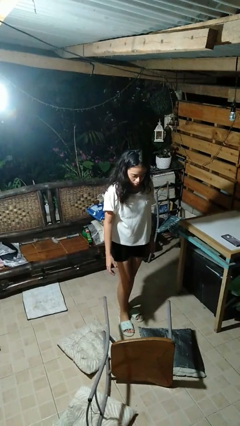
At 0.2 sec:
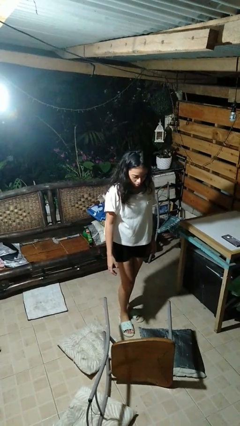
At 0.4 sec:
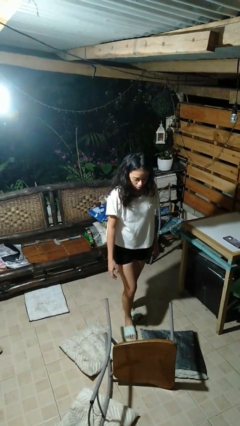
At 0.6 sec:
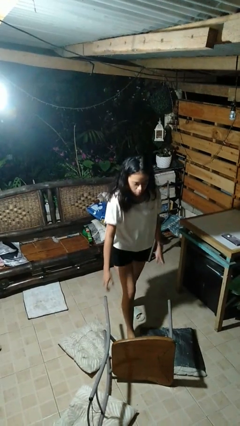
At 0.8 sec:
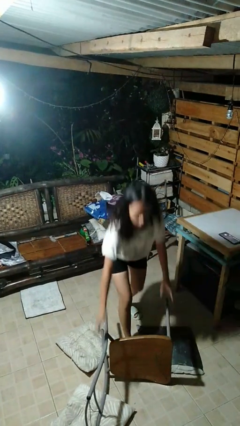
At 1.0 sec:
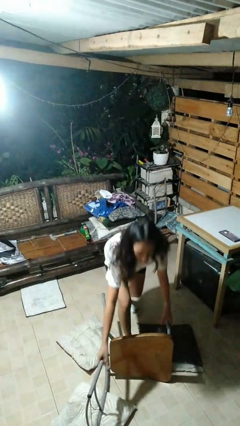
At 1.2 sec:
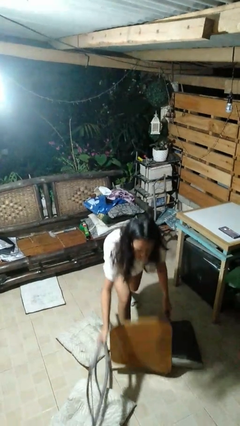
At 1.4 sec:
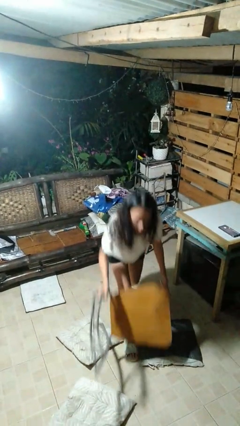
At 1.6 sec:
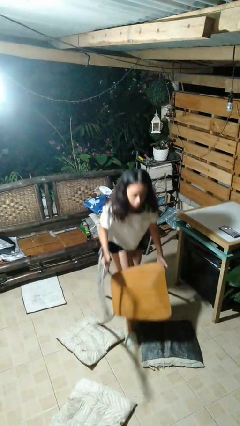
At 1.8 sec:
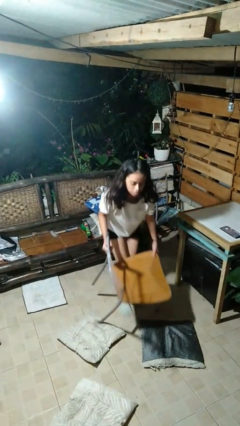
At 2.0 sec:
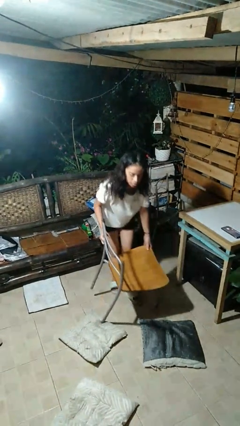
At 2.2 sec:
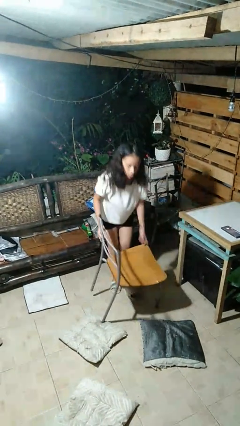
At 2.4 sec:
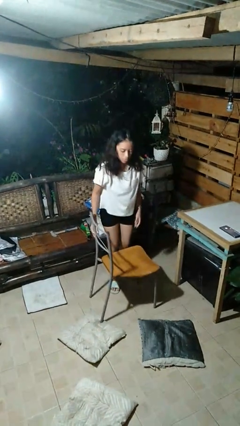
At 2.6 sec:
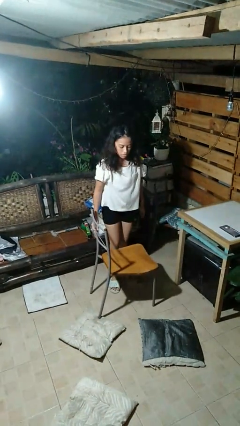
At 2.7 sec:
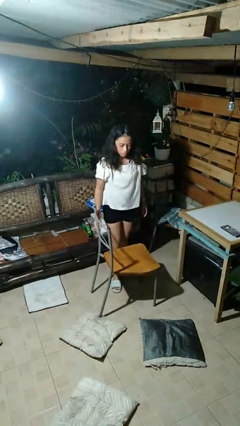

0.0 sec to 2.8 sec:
person sets upright furniture

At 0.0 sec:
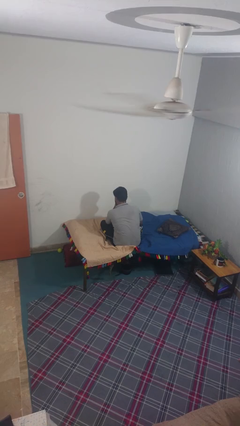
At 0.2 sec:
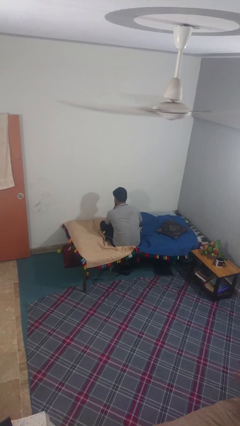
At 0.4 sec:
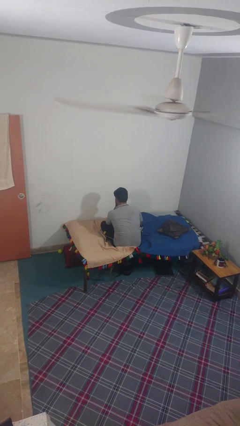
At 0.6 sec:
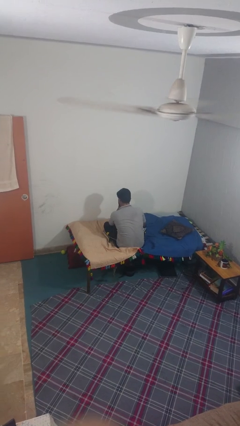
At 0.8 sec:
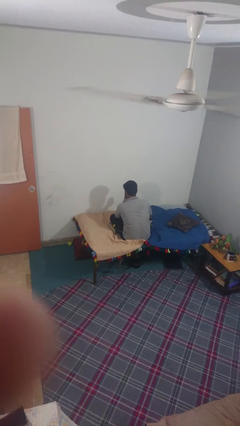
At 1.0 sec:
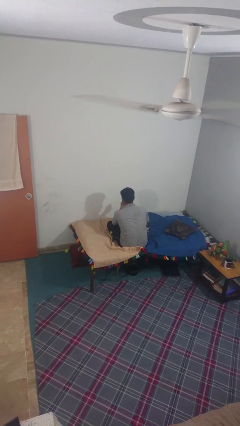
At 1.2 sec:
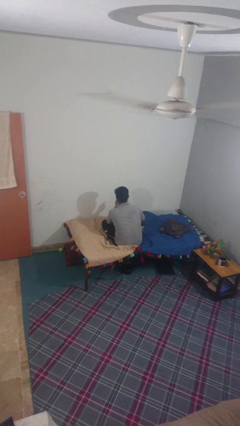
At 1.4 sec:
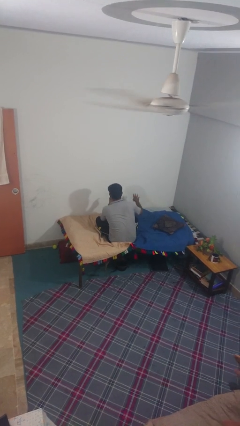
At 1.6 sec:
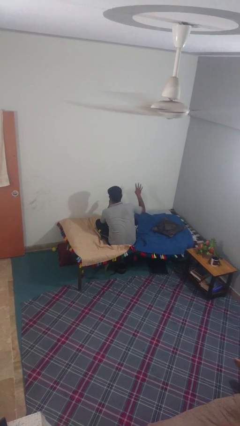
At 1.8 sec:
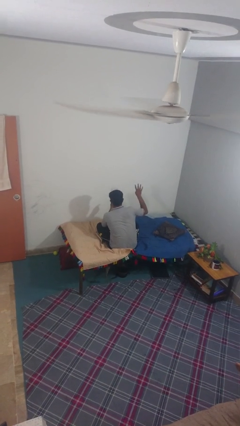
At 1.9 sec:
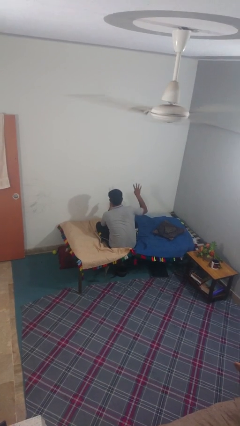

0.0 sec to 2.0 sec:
person gestures number four

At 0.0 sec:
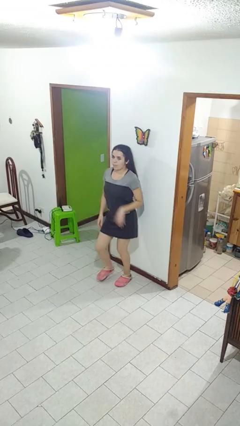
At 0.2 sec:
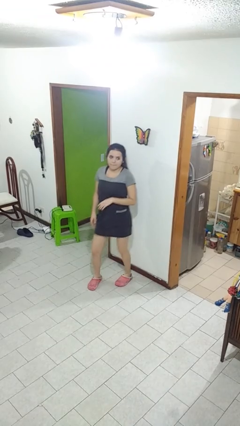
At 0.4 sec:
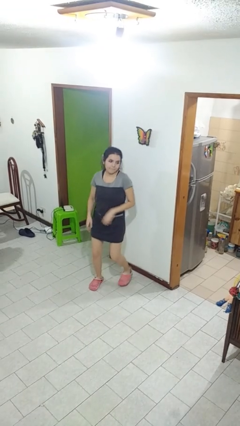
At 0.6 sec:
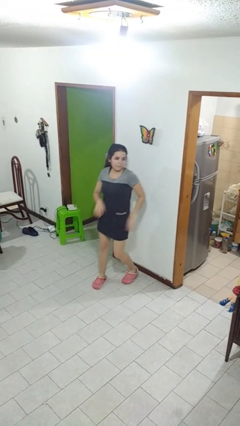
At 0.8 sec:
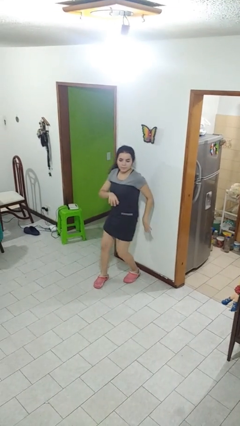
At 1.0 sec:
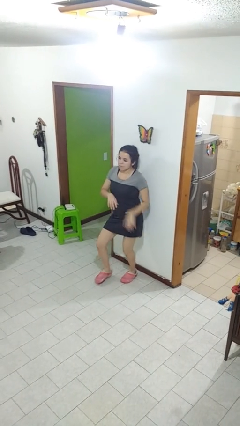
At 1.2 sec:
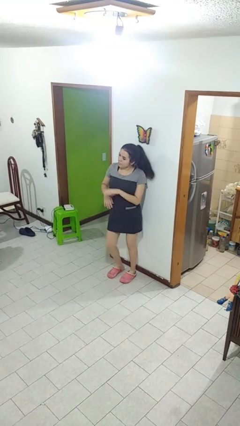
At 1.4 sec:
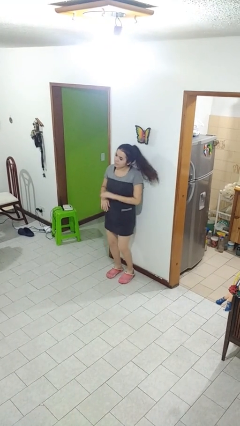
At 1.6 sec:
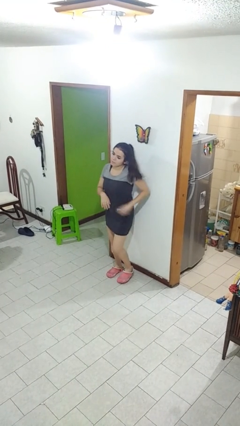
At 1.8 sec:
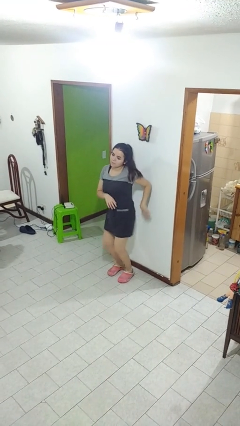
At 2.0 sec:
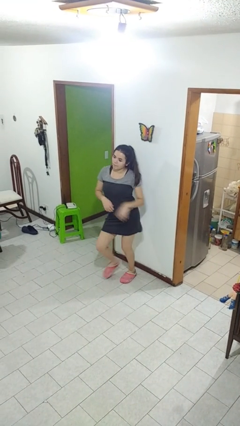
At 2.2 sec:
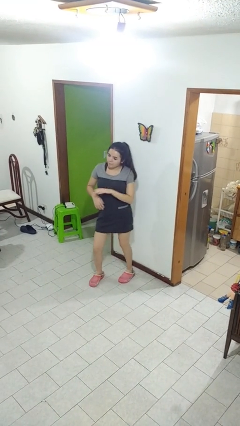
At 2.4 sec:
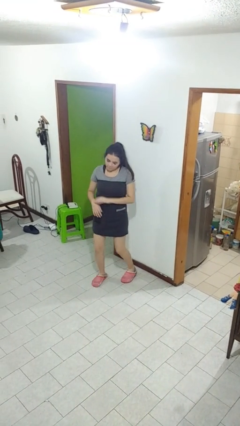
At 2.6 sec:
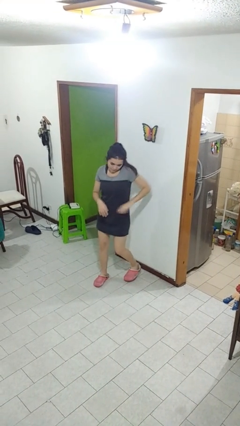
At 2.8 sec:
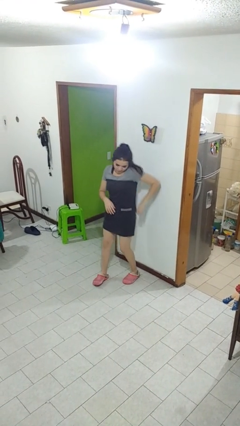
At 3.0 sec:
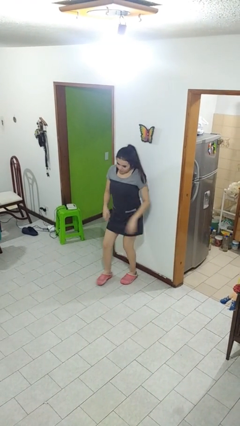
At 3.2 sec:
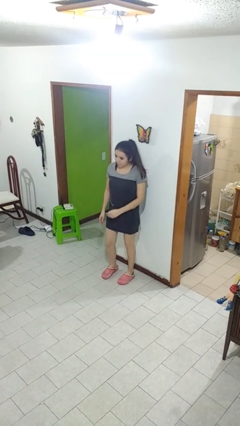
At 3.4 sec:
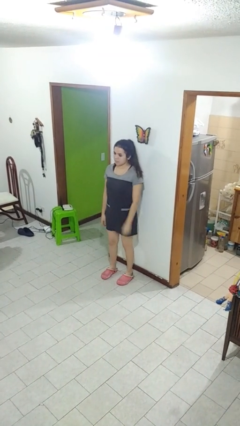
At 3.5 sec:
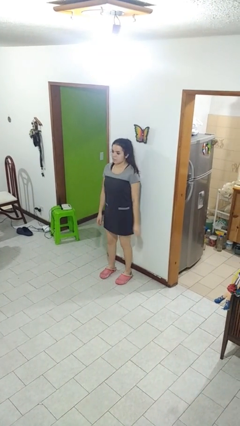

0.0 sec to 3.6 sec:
person dances in place

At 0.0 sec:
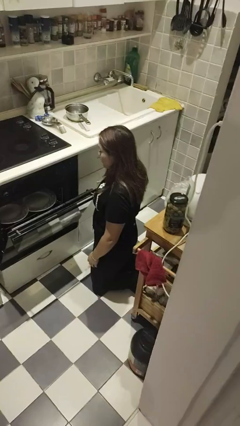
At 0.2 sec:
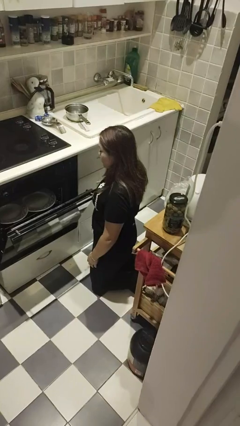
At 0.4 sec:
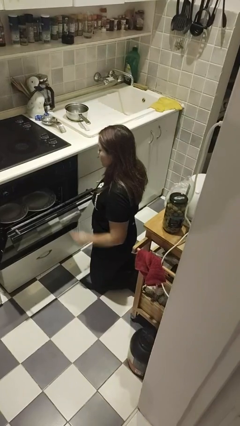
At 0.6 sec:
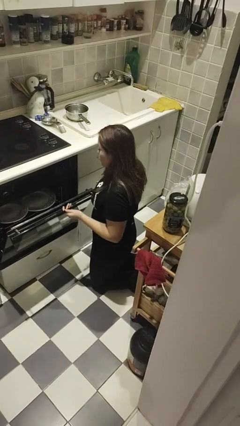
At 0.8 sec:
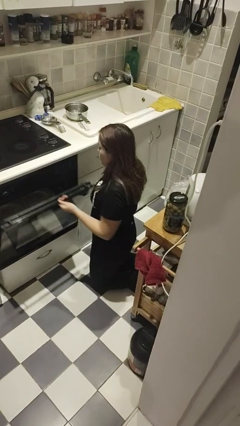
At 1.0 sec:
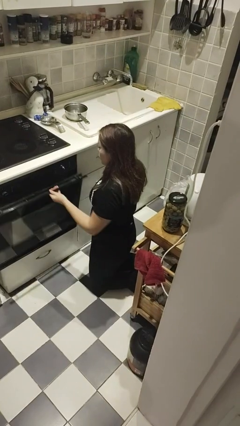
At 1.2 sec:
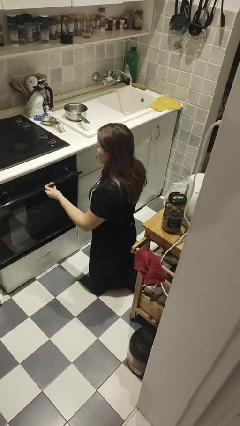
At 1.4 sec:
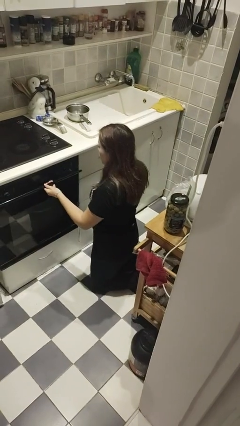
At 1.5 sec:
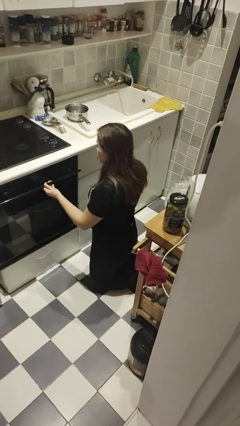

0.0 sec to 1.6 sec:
person closes dishwasher

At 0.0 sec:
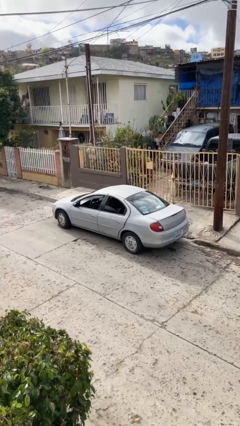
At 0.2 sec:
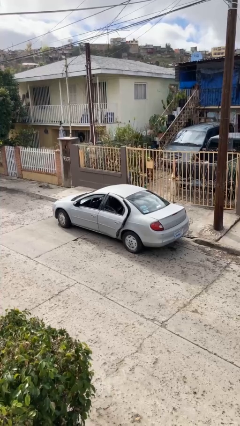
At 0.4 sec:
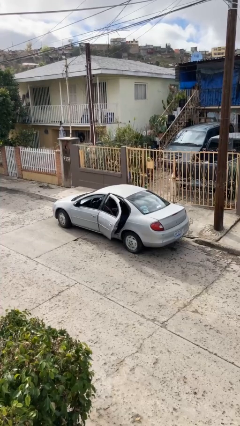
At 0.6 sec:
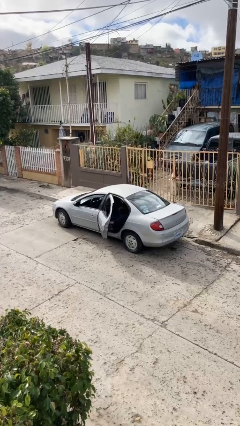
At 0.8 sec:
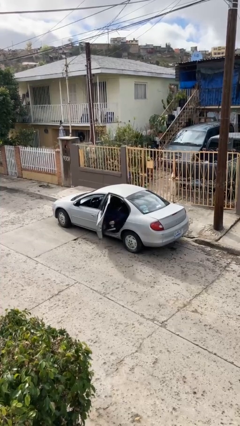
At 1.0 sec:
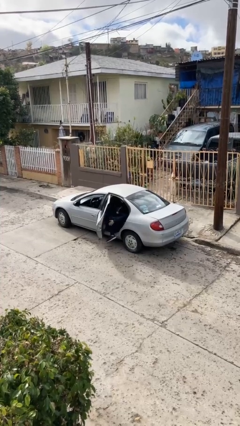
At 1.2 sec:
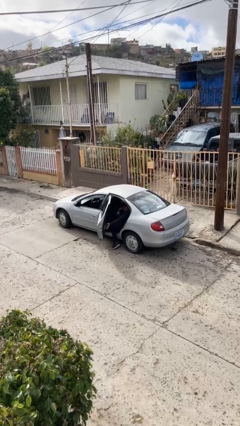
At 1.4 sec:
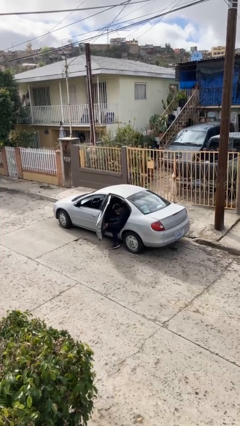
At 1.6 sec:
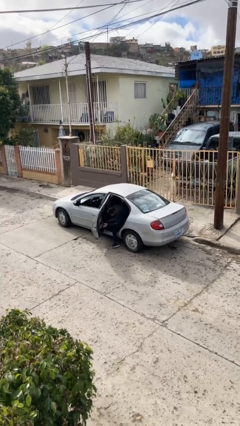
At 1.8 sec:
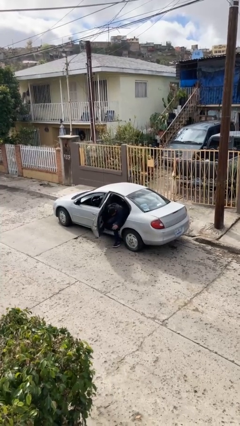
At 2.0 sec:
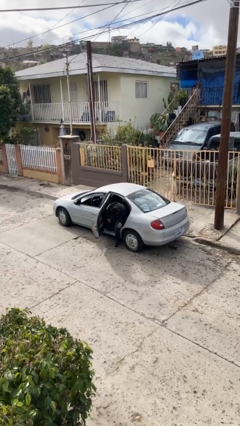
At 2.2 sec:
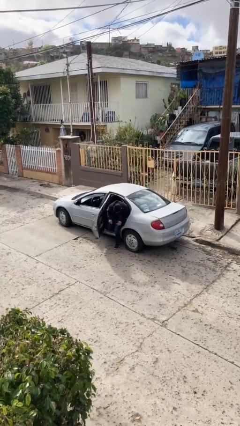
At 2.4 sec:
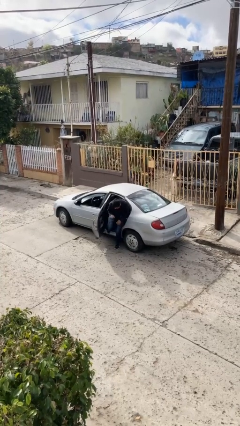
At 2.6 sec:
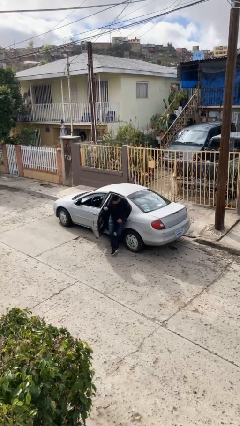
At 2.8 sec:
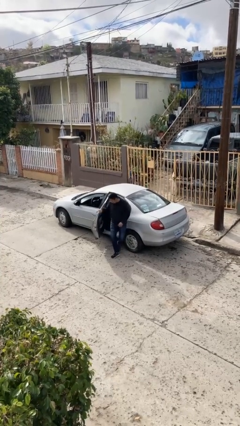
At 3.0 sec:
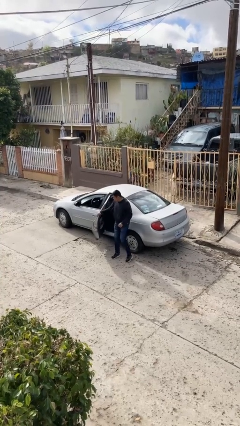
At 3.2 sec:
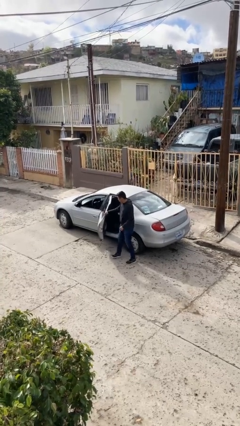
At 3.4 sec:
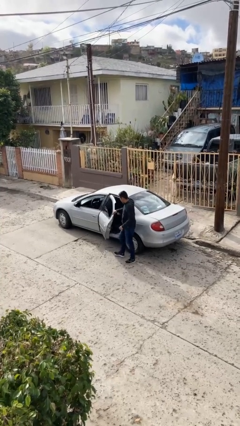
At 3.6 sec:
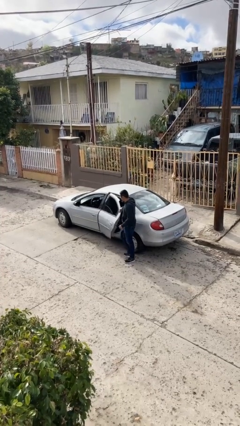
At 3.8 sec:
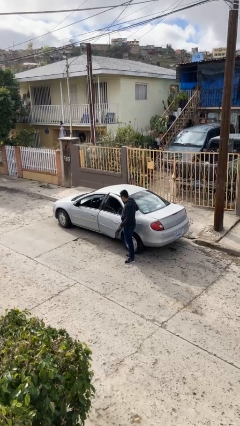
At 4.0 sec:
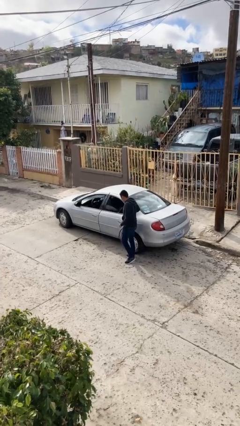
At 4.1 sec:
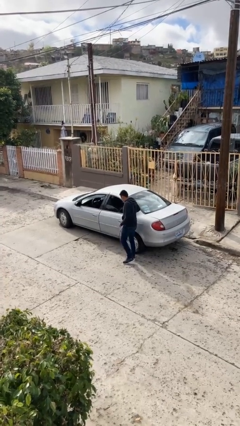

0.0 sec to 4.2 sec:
car drops off person

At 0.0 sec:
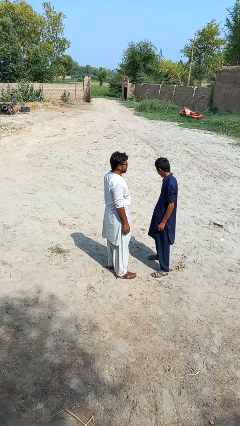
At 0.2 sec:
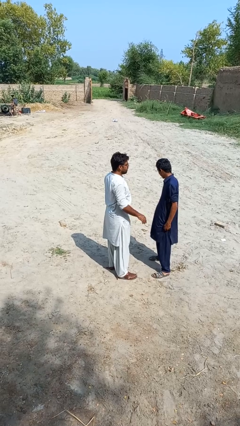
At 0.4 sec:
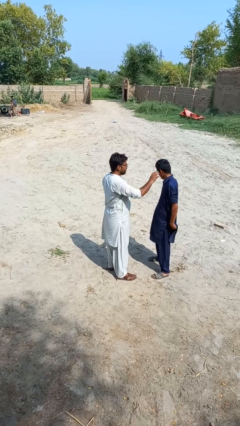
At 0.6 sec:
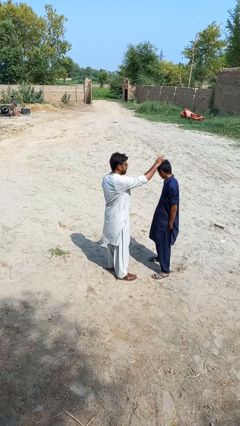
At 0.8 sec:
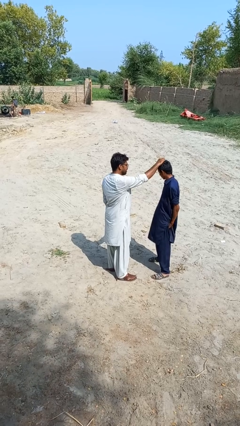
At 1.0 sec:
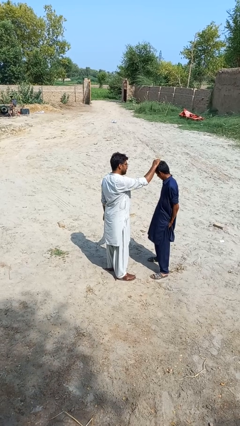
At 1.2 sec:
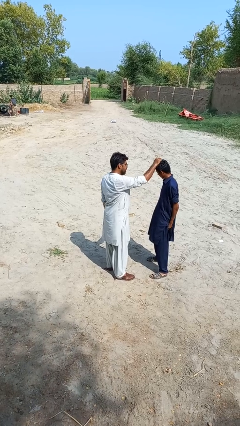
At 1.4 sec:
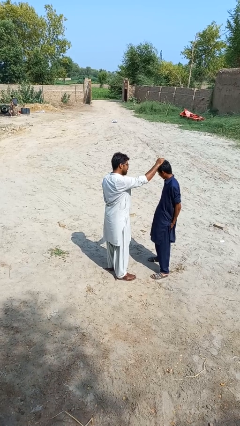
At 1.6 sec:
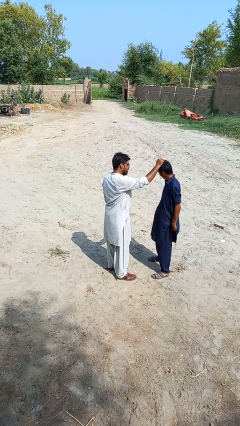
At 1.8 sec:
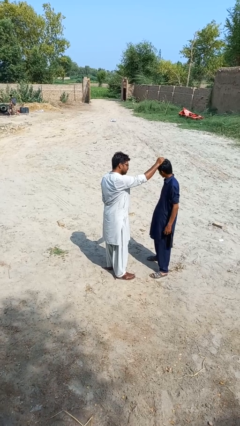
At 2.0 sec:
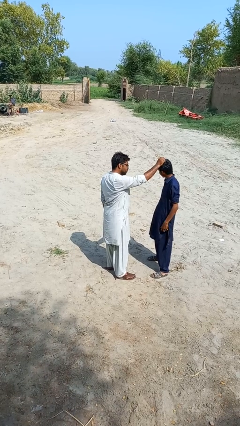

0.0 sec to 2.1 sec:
person grabs person by hair

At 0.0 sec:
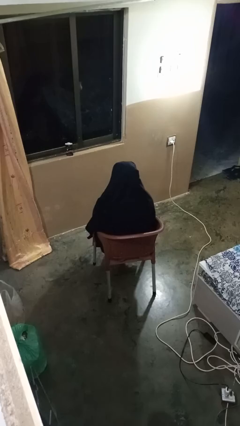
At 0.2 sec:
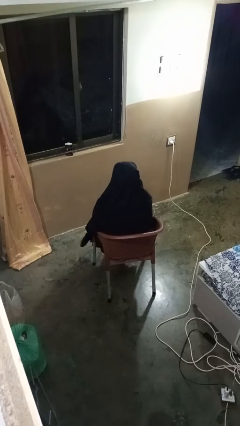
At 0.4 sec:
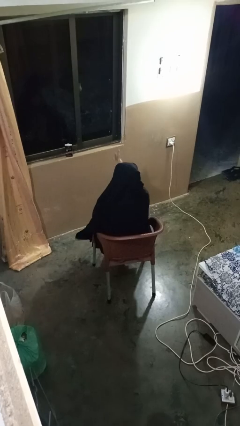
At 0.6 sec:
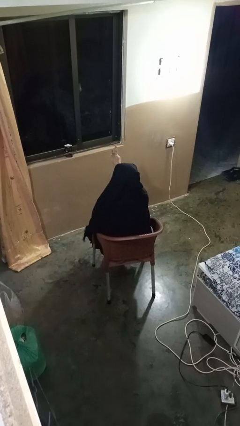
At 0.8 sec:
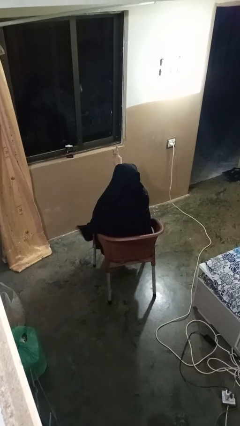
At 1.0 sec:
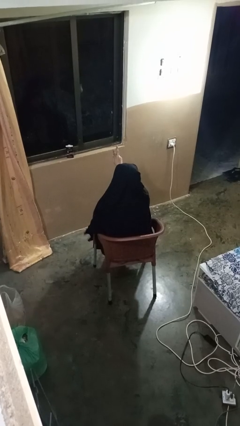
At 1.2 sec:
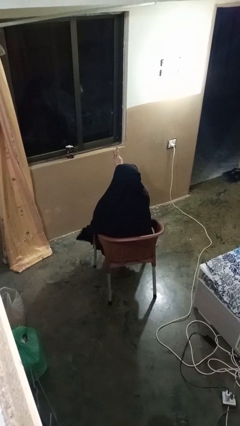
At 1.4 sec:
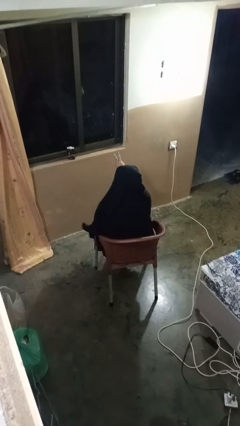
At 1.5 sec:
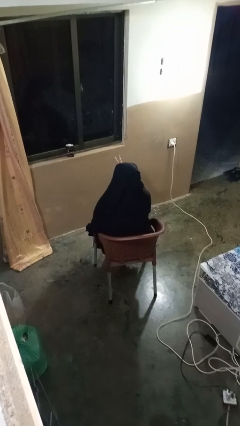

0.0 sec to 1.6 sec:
person gestures peace
